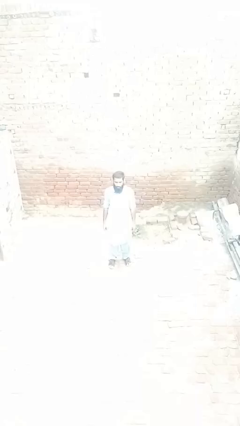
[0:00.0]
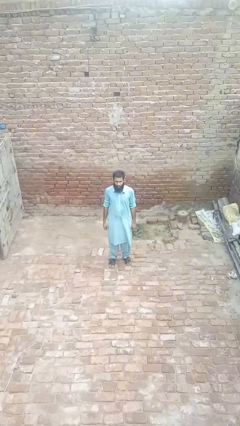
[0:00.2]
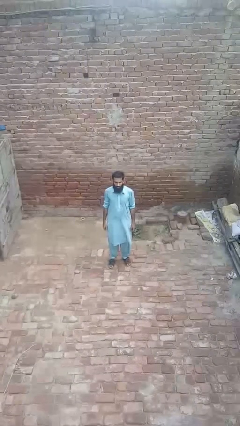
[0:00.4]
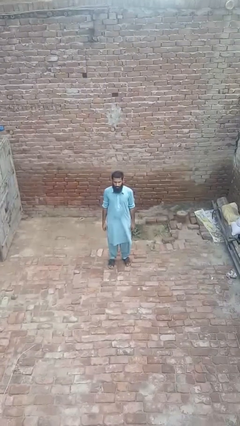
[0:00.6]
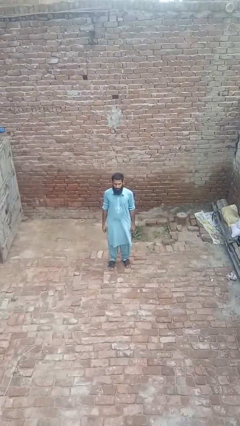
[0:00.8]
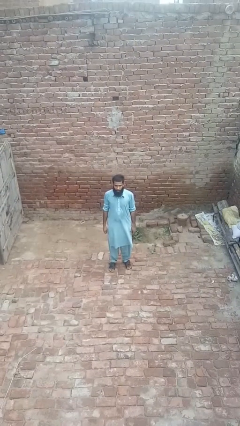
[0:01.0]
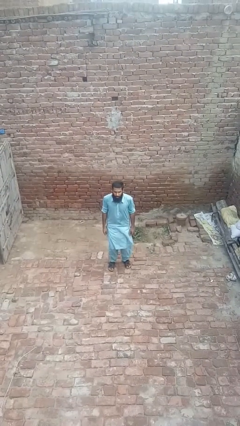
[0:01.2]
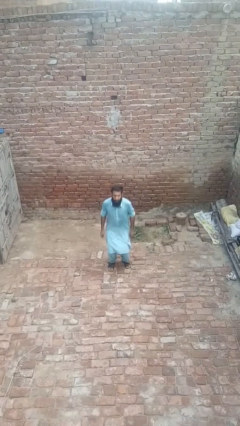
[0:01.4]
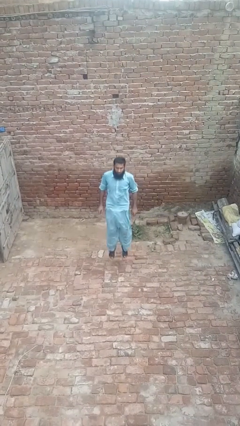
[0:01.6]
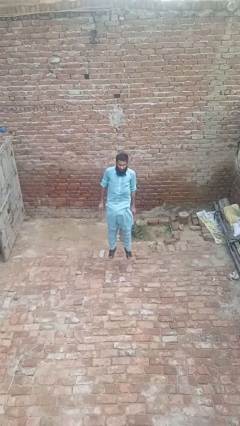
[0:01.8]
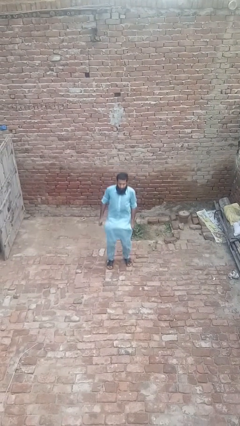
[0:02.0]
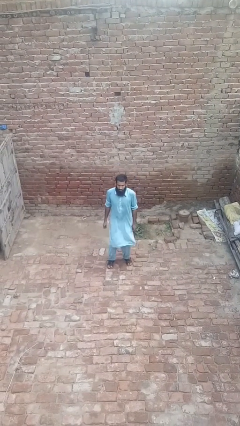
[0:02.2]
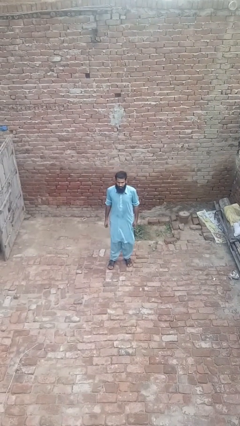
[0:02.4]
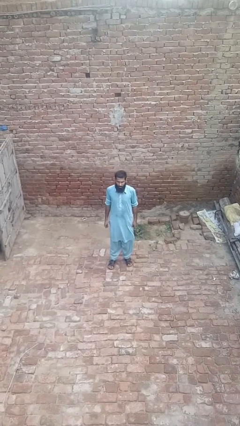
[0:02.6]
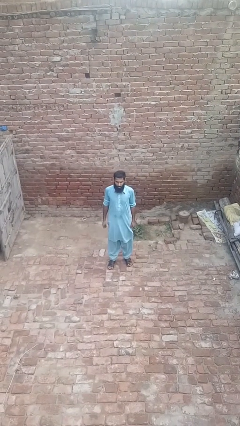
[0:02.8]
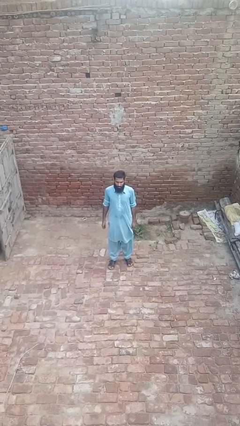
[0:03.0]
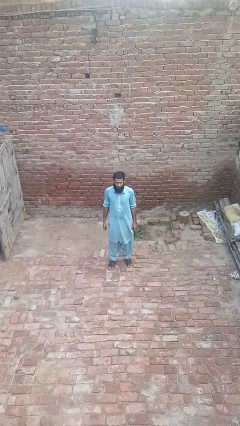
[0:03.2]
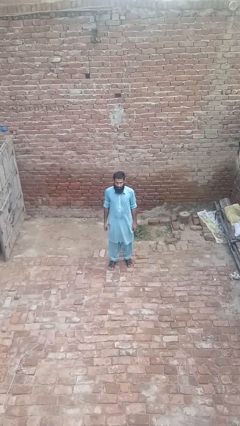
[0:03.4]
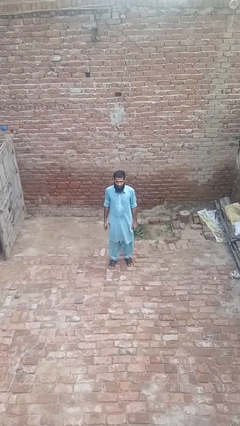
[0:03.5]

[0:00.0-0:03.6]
person jumps

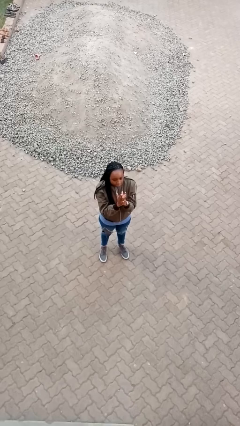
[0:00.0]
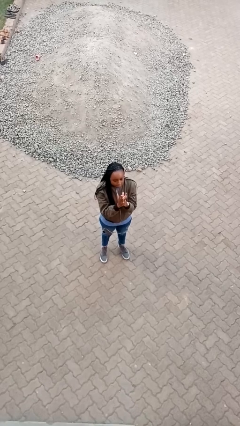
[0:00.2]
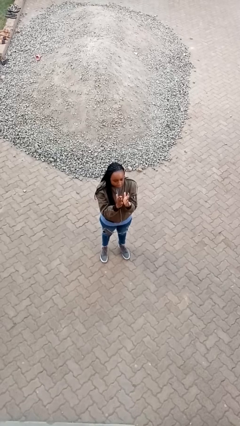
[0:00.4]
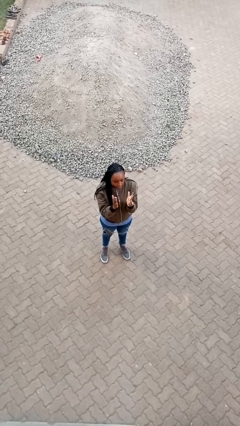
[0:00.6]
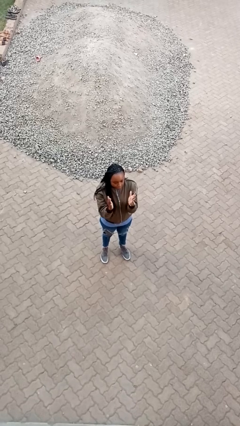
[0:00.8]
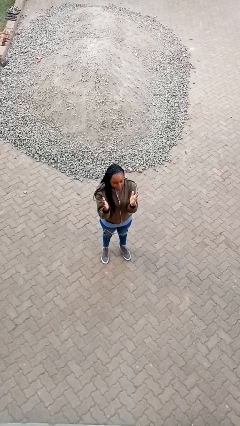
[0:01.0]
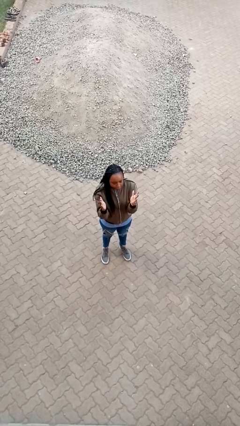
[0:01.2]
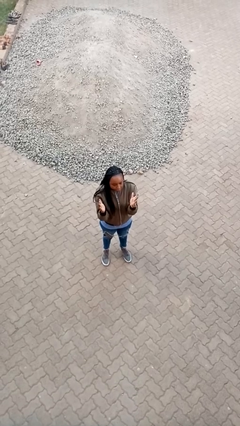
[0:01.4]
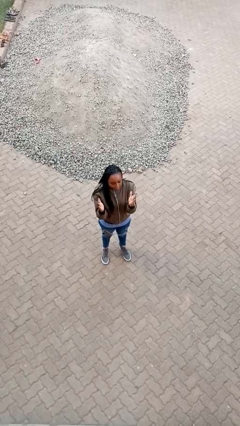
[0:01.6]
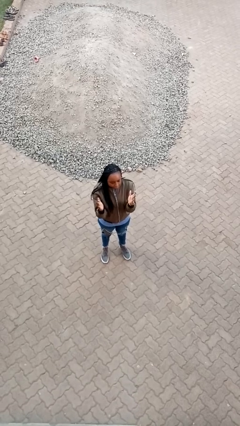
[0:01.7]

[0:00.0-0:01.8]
person gestures zoom out

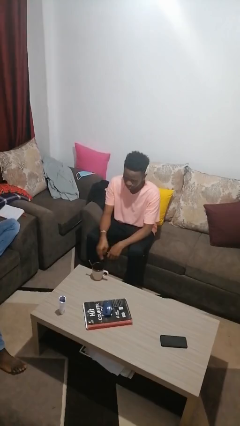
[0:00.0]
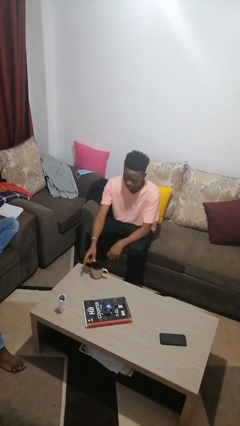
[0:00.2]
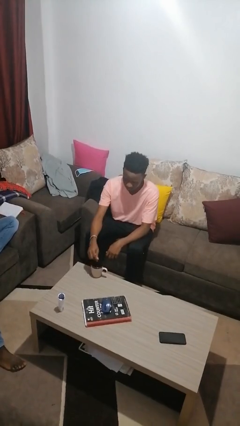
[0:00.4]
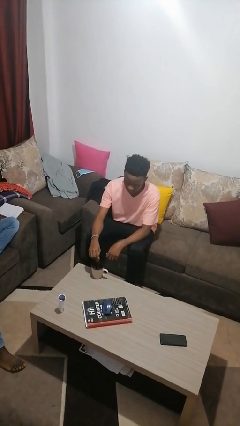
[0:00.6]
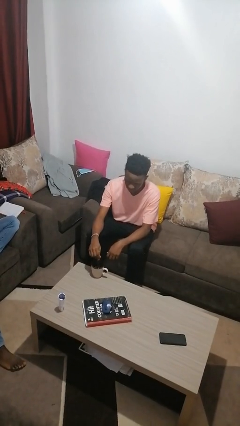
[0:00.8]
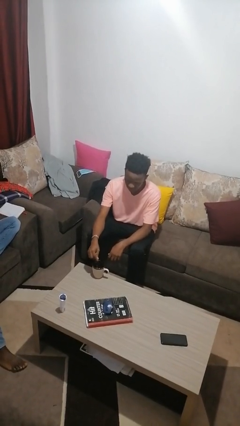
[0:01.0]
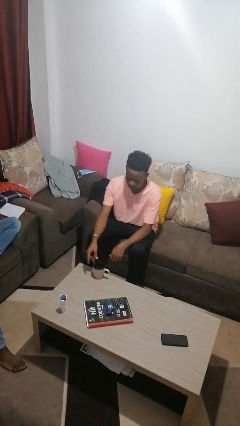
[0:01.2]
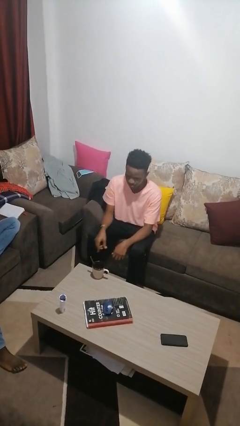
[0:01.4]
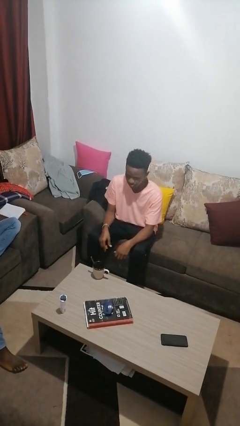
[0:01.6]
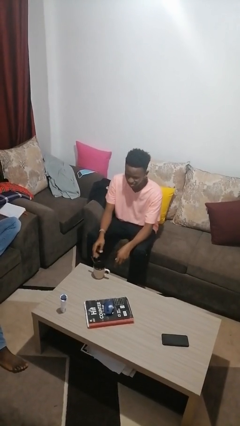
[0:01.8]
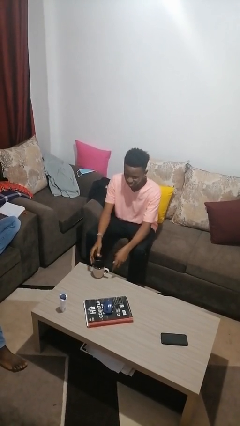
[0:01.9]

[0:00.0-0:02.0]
person stirs mug

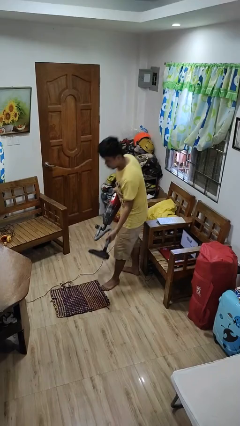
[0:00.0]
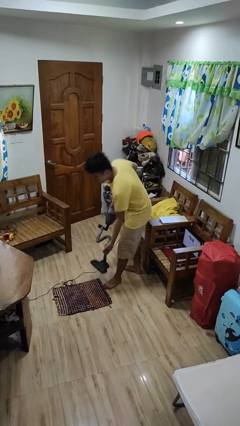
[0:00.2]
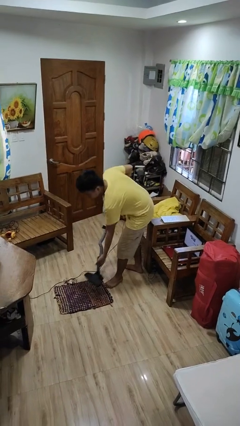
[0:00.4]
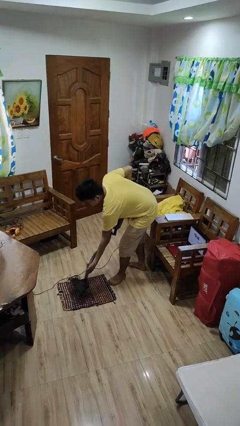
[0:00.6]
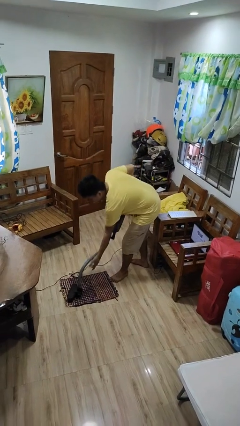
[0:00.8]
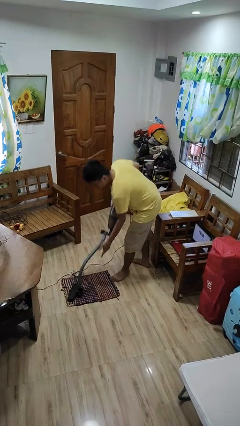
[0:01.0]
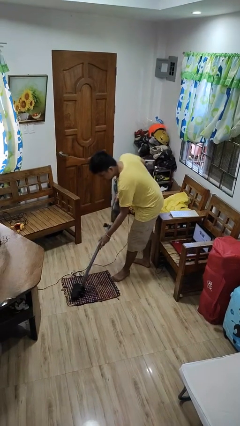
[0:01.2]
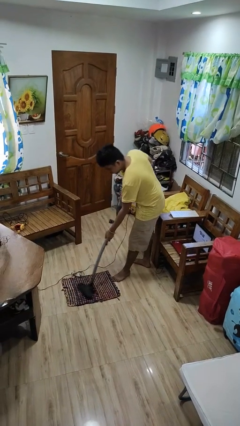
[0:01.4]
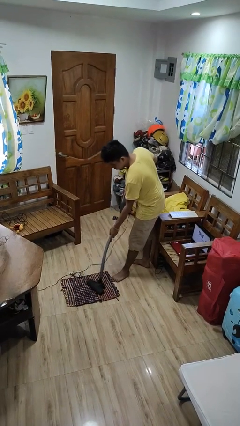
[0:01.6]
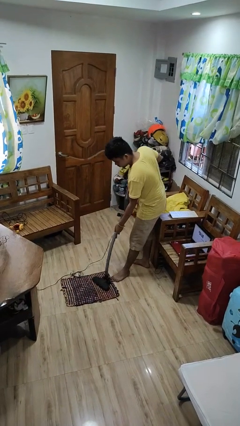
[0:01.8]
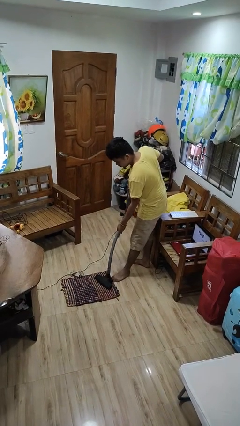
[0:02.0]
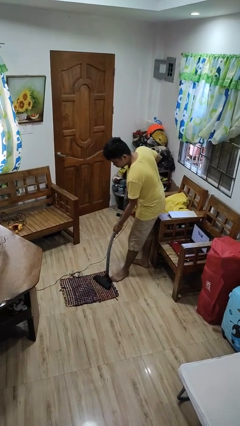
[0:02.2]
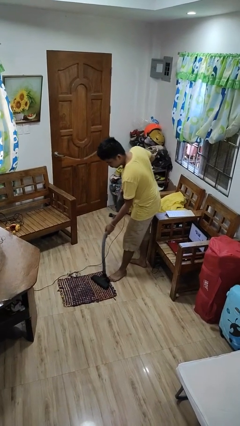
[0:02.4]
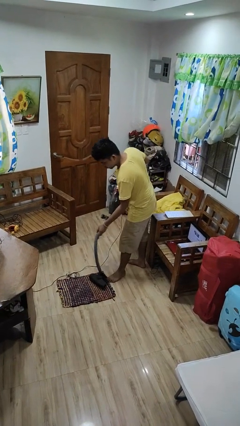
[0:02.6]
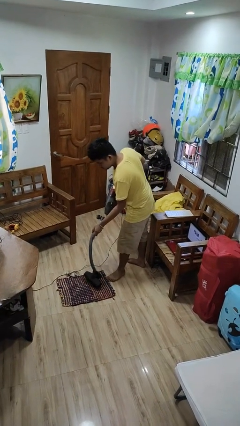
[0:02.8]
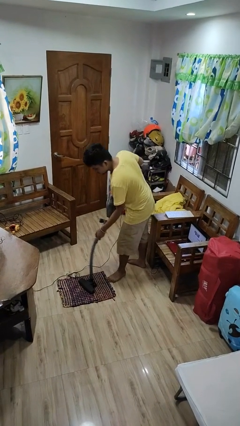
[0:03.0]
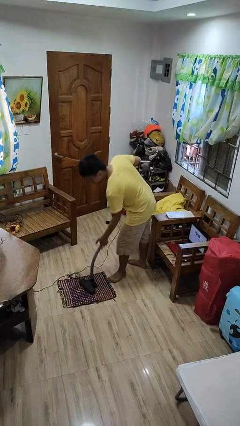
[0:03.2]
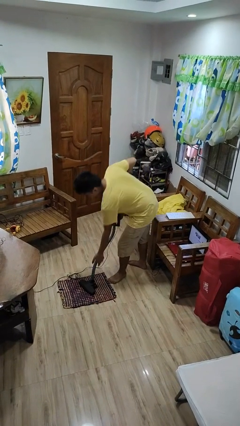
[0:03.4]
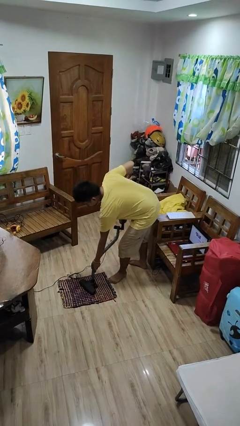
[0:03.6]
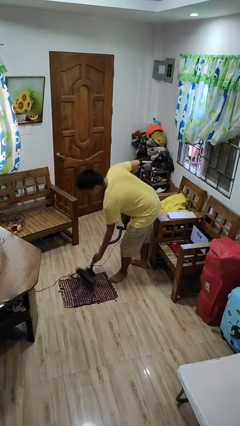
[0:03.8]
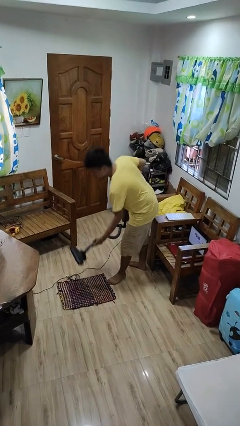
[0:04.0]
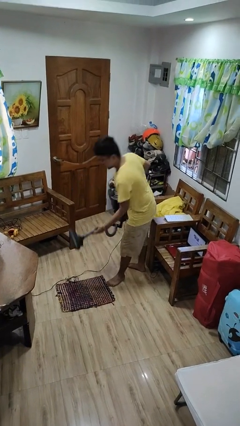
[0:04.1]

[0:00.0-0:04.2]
person vacuums carpet

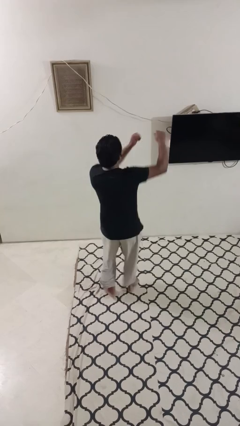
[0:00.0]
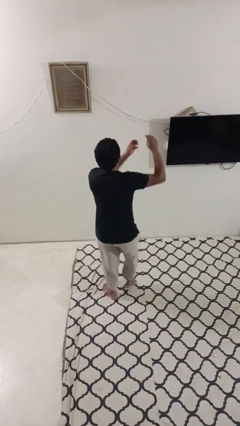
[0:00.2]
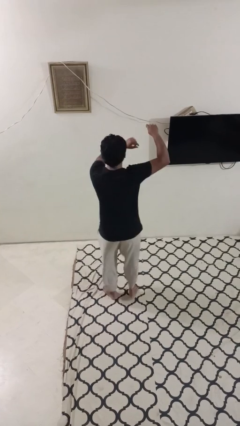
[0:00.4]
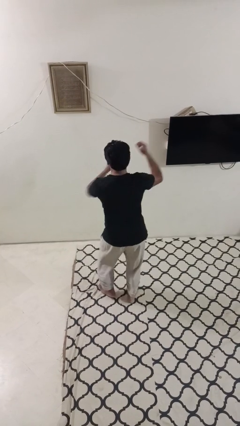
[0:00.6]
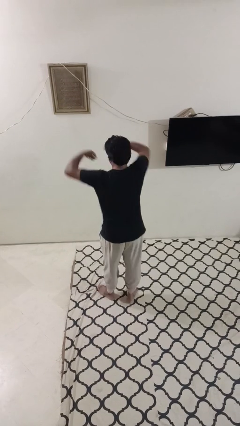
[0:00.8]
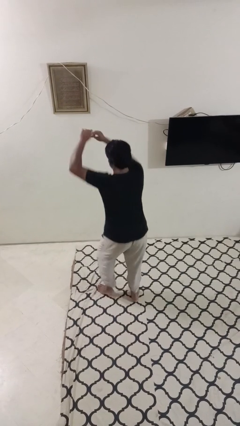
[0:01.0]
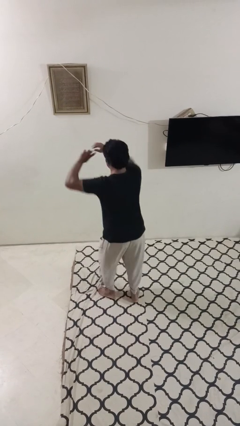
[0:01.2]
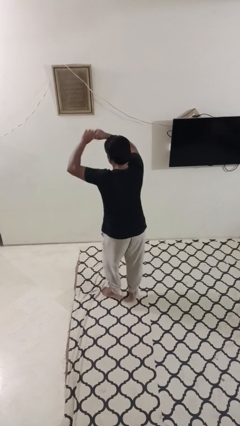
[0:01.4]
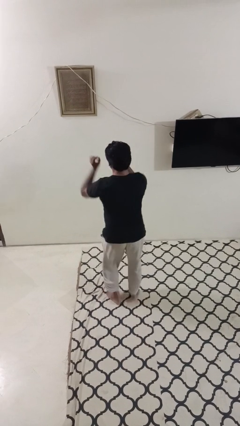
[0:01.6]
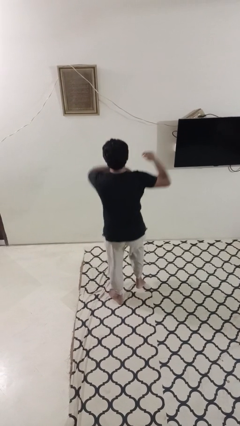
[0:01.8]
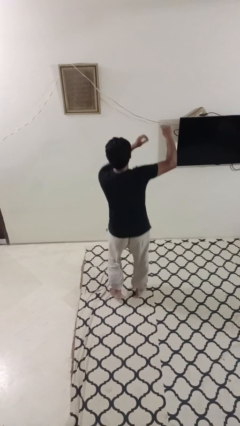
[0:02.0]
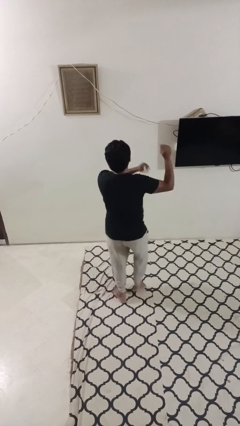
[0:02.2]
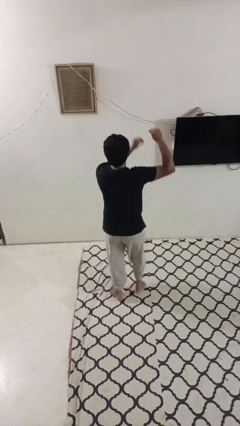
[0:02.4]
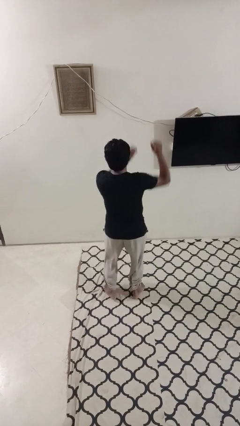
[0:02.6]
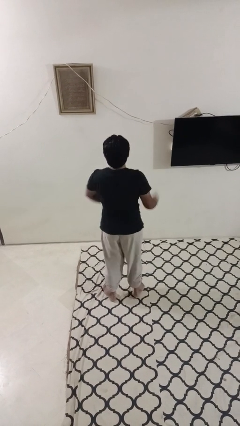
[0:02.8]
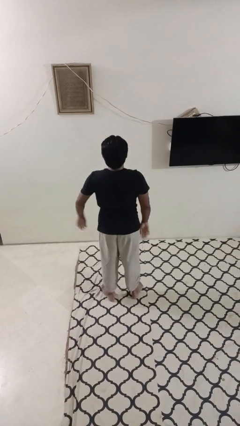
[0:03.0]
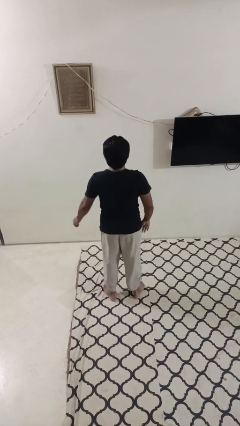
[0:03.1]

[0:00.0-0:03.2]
person dances in place

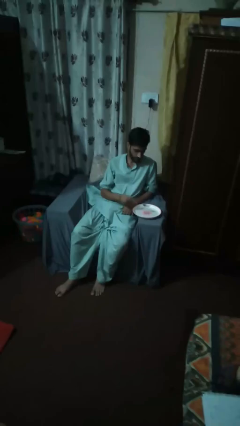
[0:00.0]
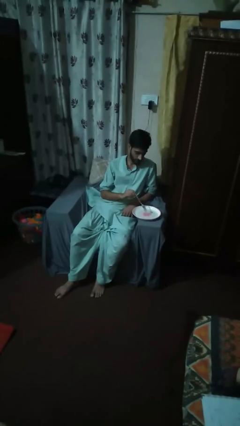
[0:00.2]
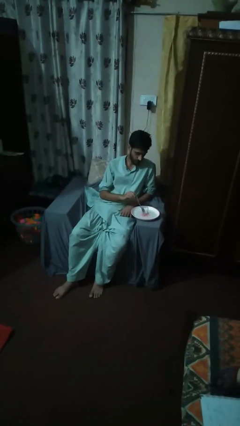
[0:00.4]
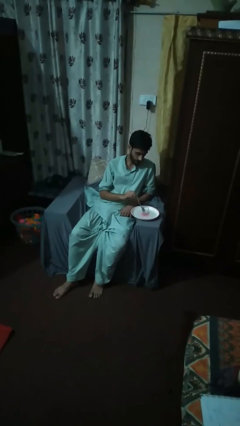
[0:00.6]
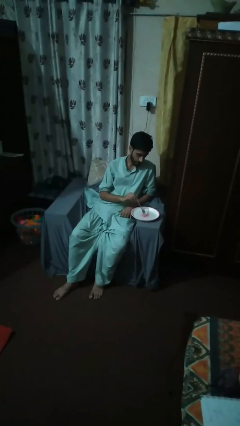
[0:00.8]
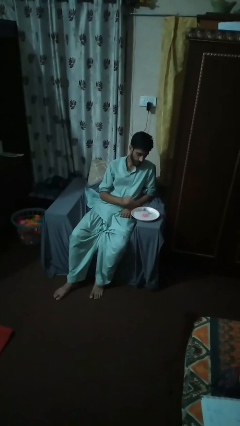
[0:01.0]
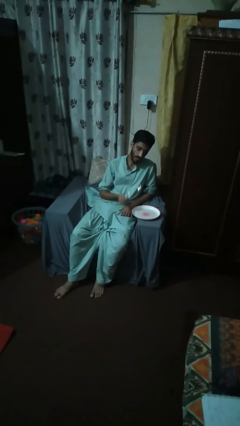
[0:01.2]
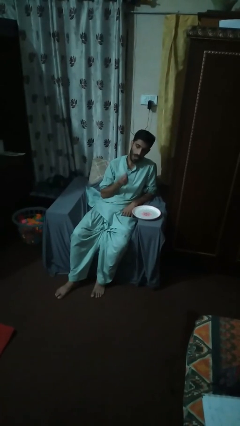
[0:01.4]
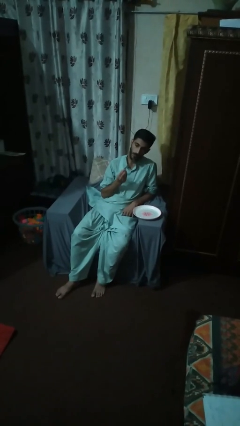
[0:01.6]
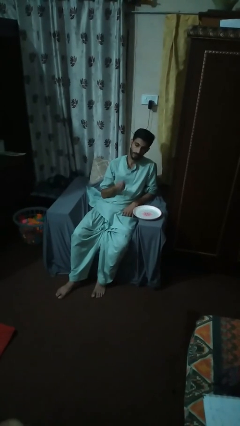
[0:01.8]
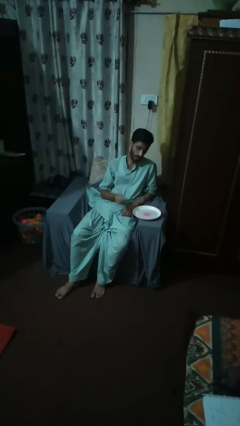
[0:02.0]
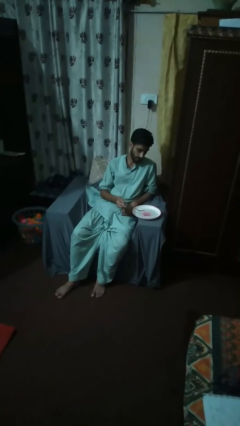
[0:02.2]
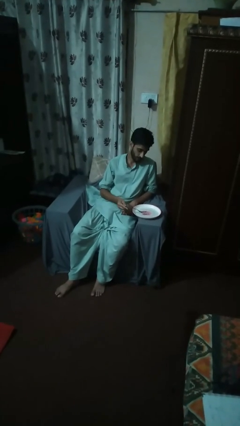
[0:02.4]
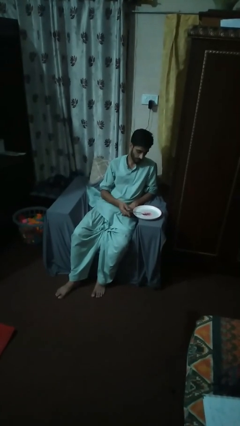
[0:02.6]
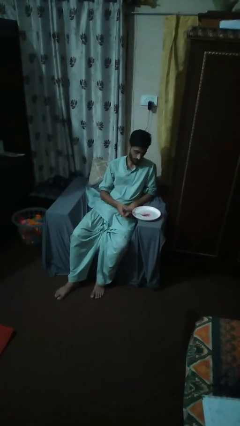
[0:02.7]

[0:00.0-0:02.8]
person eats with utensil
